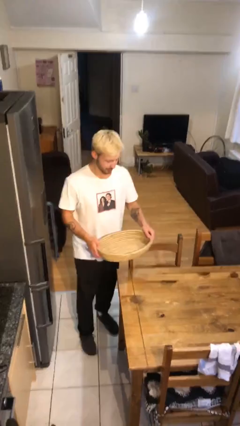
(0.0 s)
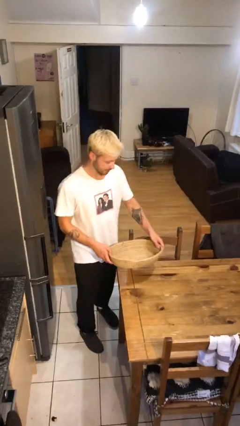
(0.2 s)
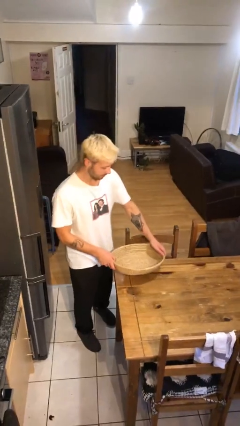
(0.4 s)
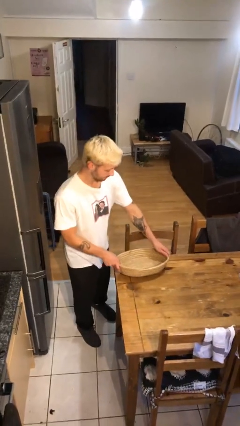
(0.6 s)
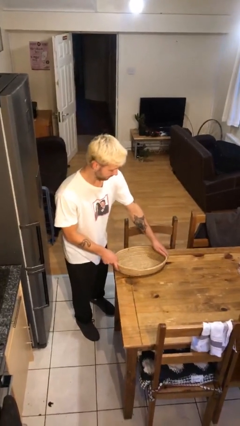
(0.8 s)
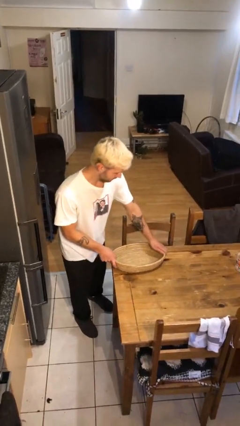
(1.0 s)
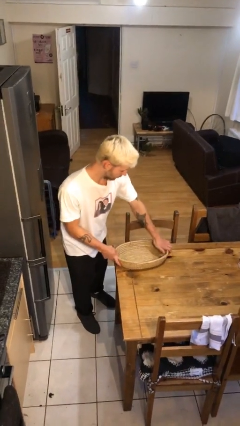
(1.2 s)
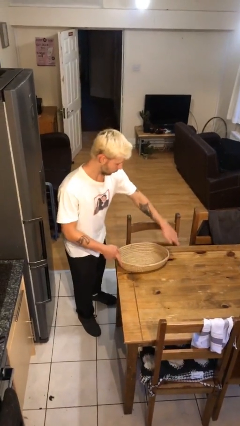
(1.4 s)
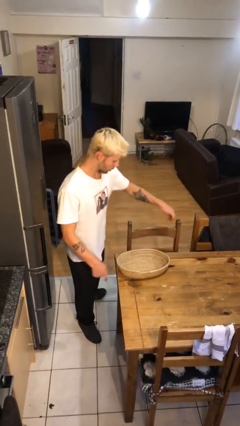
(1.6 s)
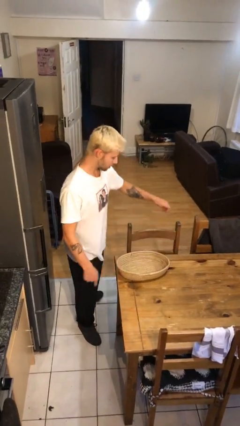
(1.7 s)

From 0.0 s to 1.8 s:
person puts down object on table

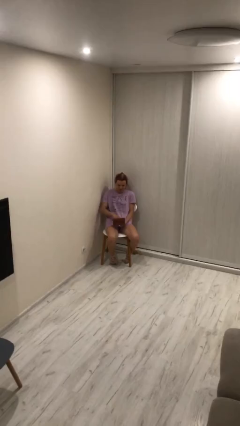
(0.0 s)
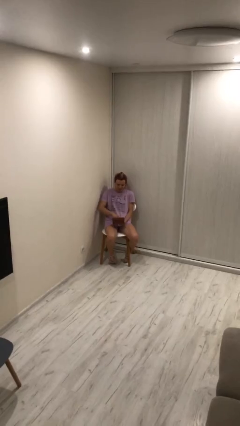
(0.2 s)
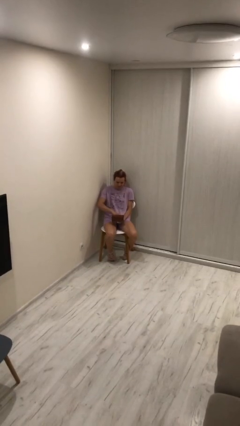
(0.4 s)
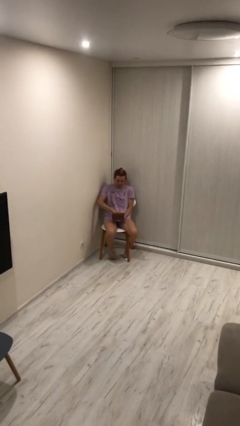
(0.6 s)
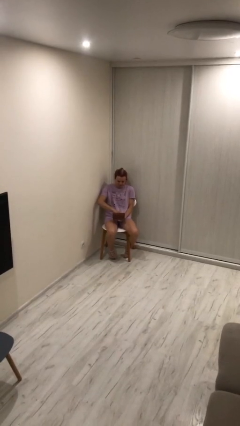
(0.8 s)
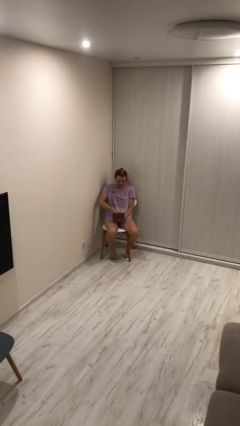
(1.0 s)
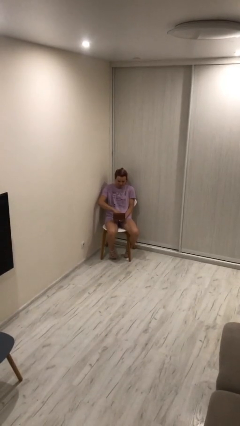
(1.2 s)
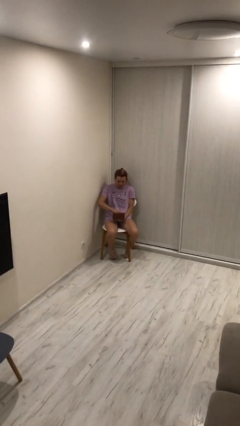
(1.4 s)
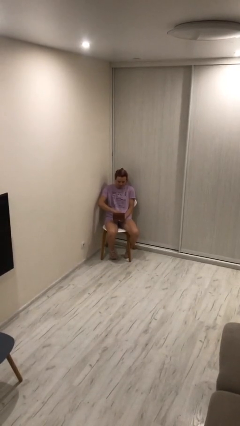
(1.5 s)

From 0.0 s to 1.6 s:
person searches jewelry box

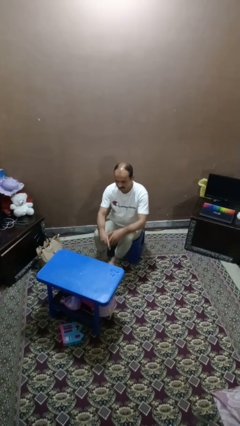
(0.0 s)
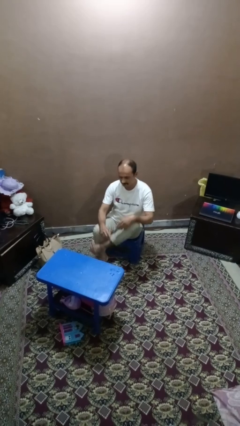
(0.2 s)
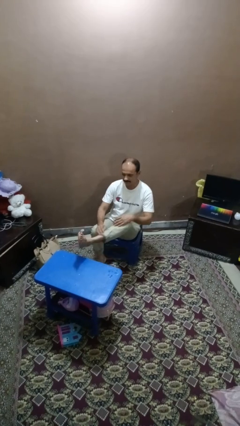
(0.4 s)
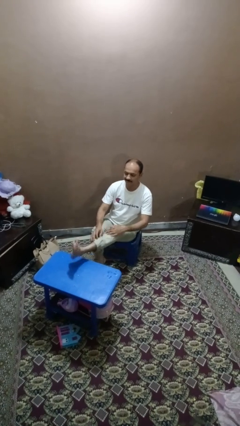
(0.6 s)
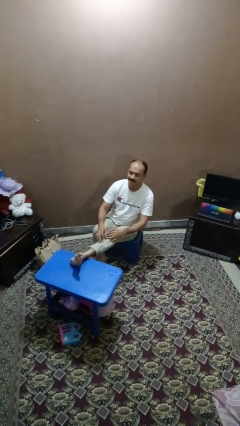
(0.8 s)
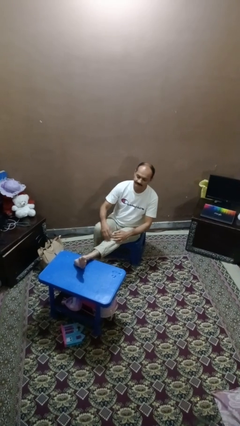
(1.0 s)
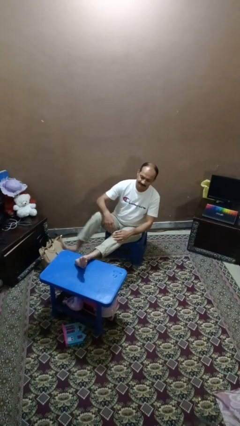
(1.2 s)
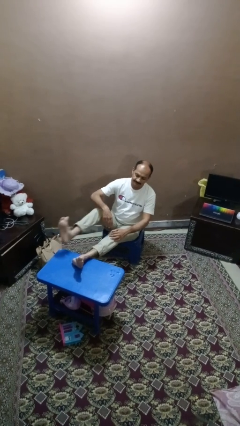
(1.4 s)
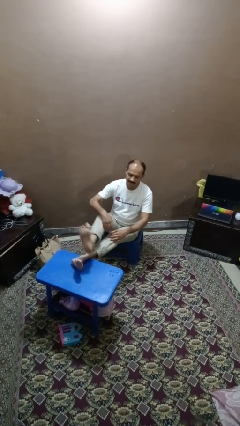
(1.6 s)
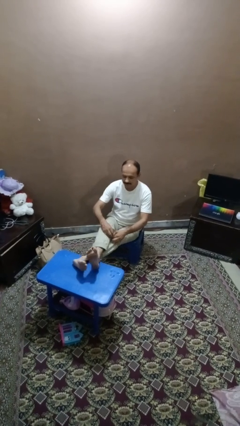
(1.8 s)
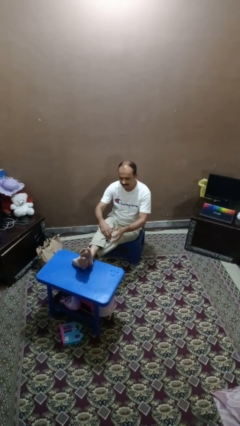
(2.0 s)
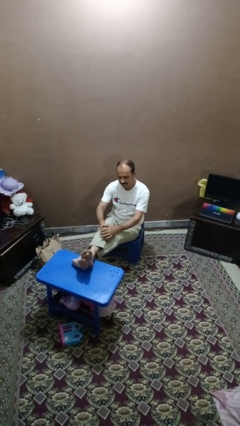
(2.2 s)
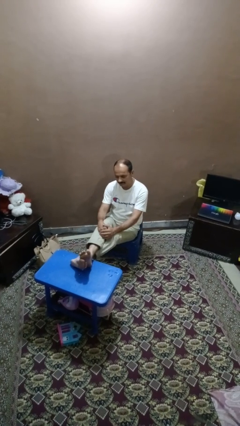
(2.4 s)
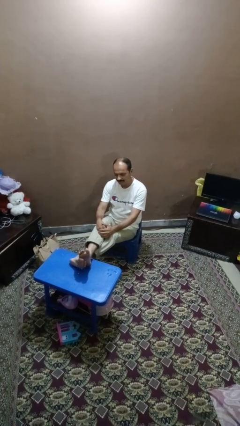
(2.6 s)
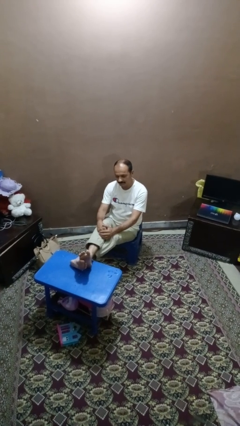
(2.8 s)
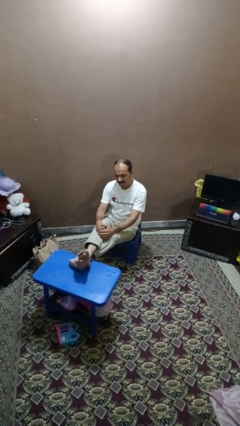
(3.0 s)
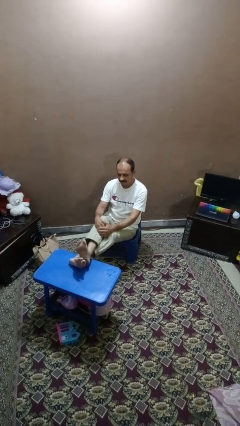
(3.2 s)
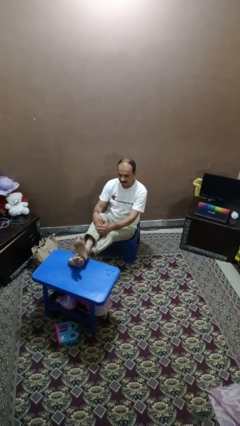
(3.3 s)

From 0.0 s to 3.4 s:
person puts feet up

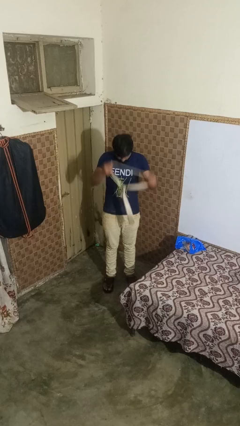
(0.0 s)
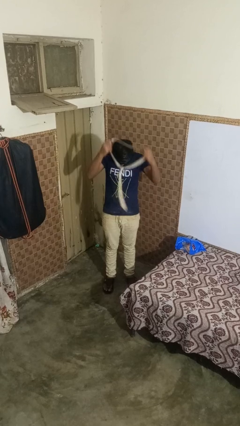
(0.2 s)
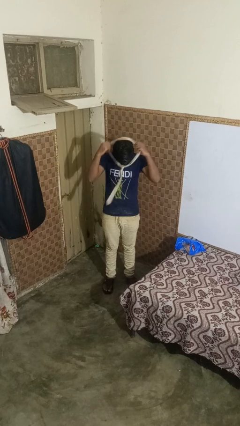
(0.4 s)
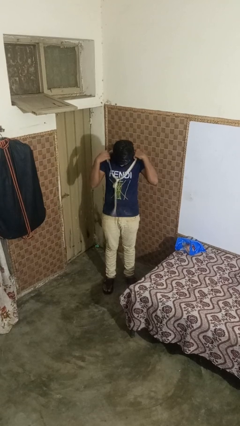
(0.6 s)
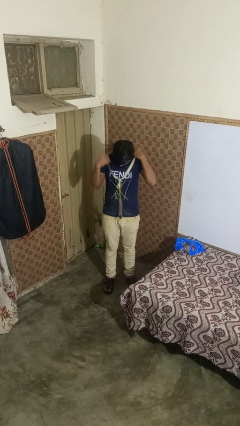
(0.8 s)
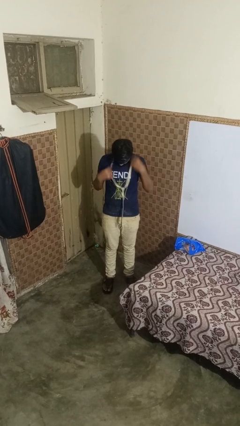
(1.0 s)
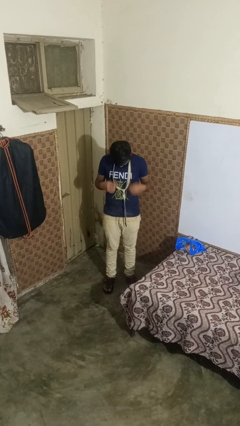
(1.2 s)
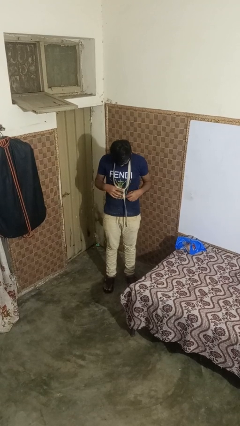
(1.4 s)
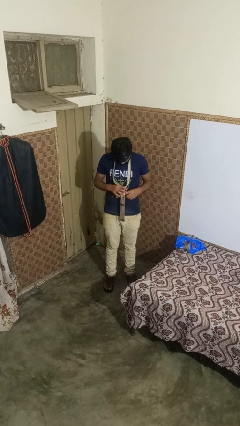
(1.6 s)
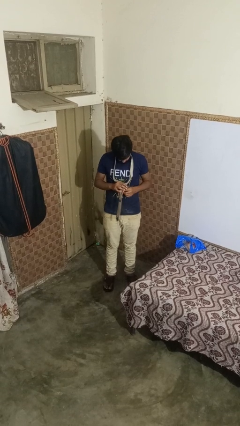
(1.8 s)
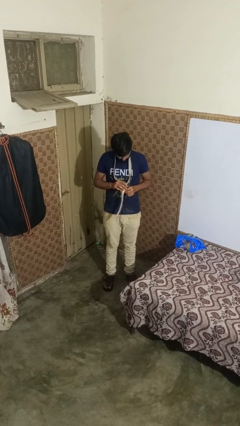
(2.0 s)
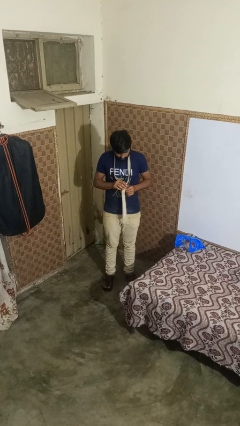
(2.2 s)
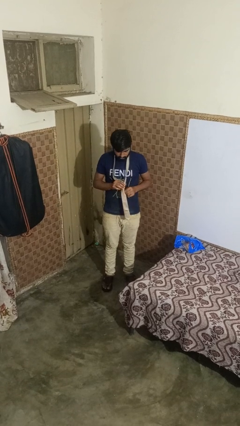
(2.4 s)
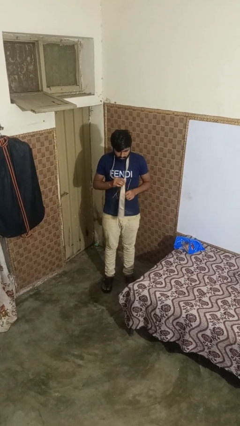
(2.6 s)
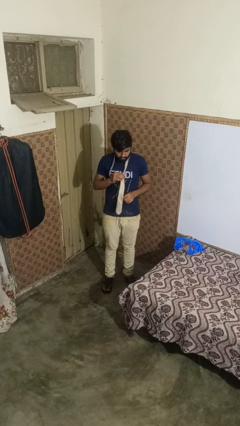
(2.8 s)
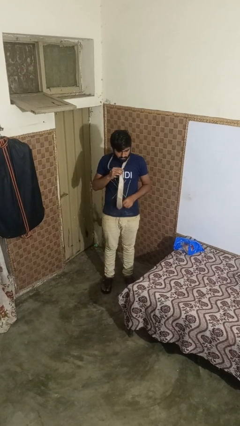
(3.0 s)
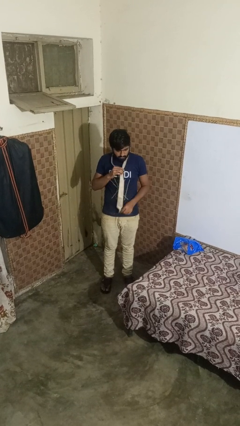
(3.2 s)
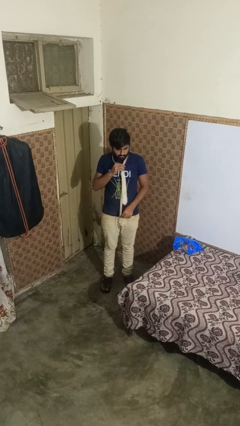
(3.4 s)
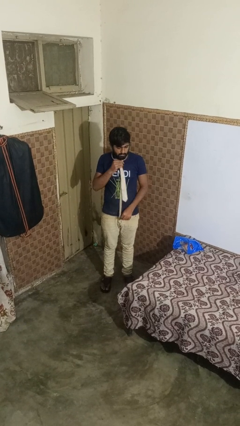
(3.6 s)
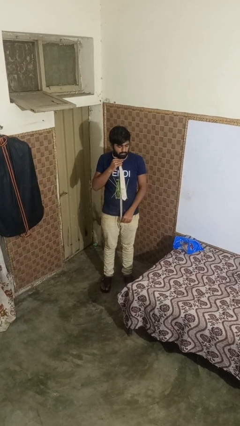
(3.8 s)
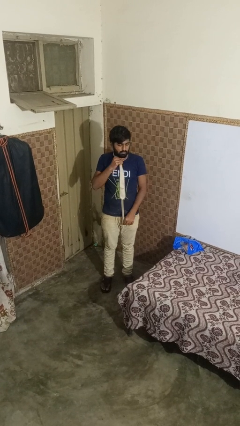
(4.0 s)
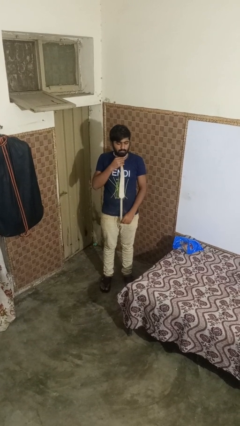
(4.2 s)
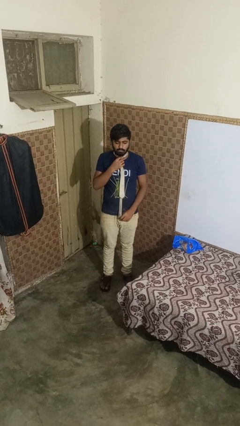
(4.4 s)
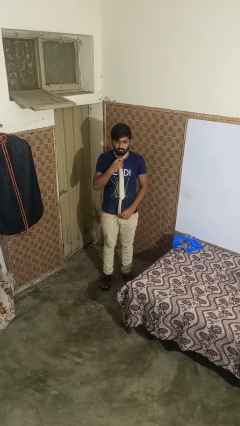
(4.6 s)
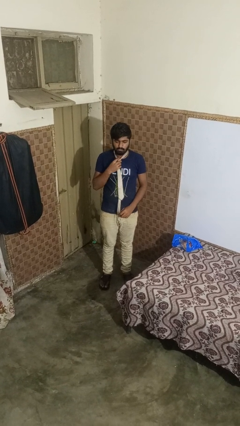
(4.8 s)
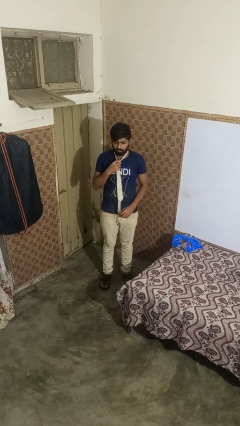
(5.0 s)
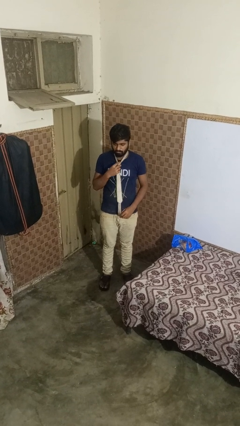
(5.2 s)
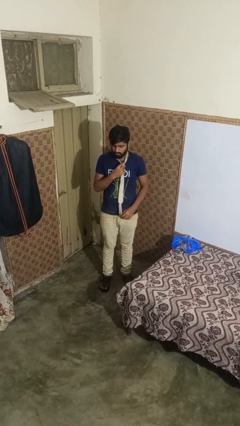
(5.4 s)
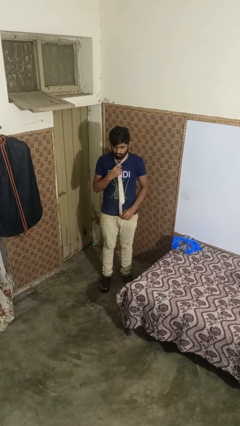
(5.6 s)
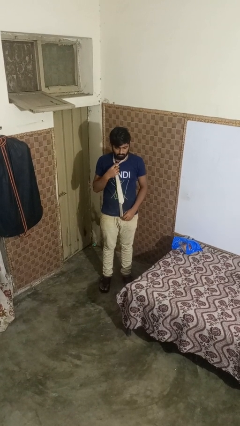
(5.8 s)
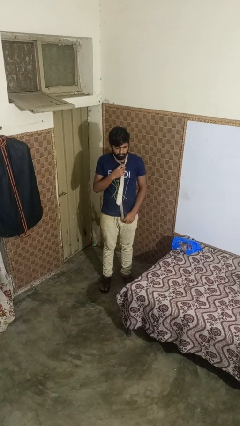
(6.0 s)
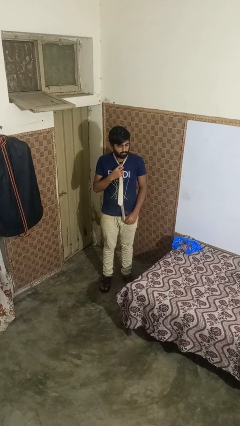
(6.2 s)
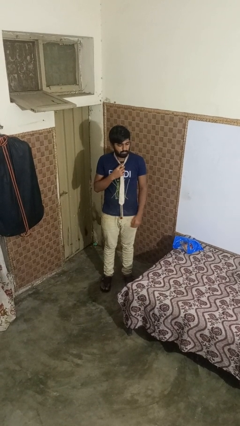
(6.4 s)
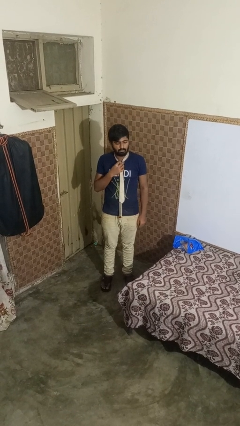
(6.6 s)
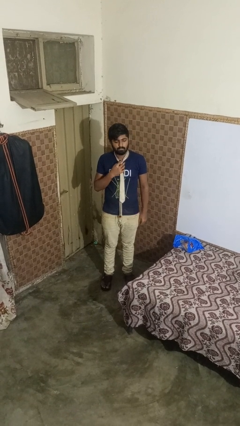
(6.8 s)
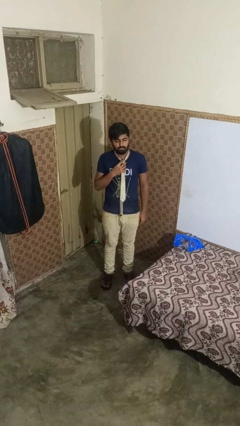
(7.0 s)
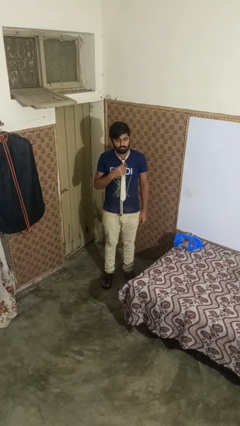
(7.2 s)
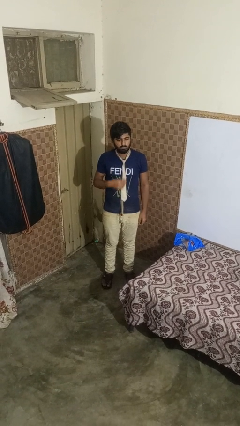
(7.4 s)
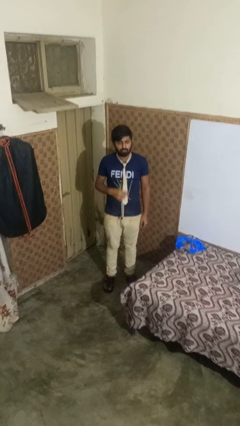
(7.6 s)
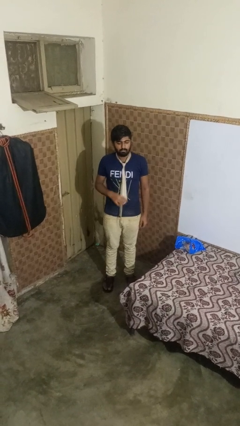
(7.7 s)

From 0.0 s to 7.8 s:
person puts on necktie

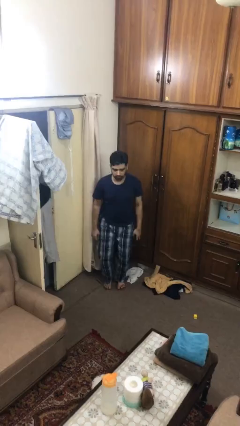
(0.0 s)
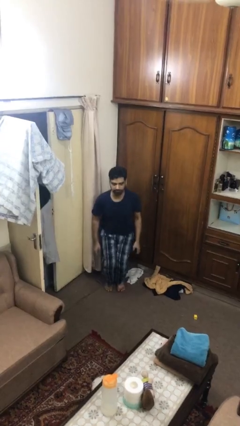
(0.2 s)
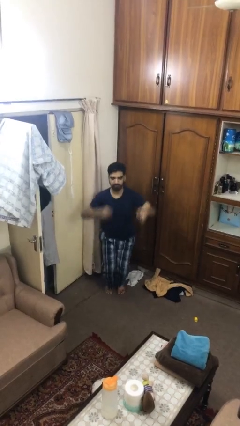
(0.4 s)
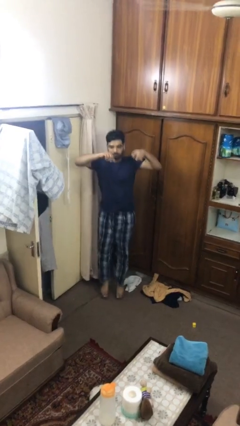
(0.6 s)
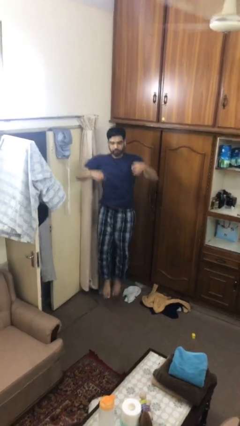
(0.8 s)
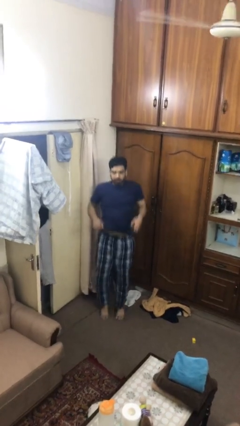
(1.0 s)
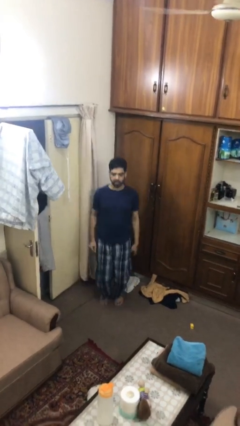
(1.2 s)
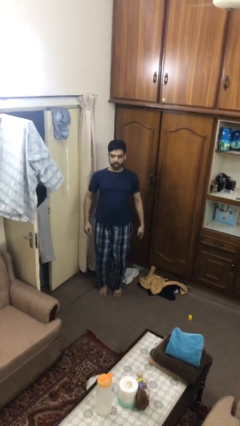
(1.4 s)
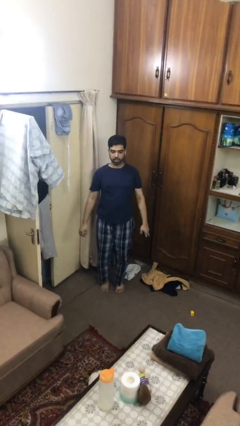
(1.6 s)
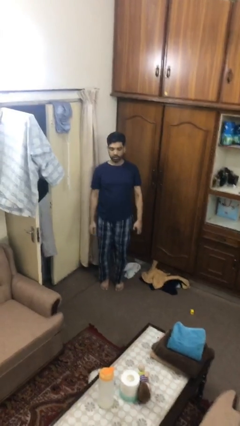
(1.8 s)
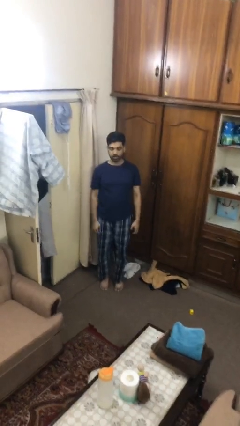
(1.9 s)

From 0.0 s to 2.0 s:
person jumps

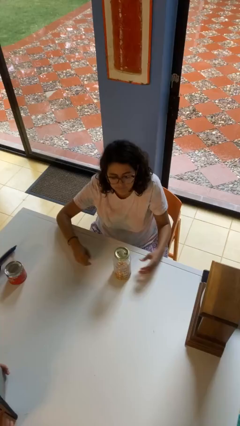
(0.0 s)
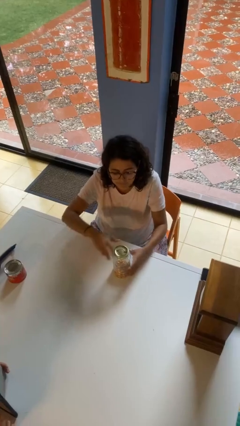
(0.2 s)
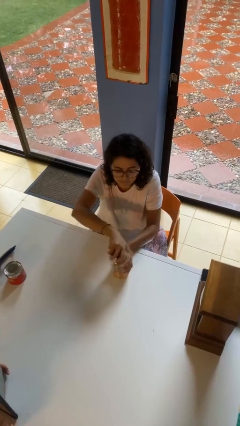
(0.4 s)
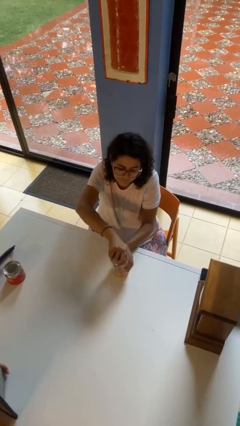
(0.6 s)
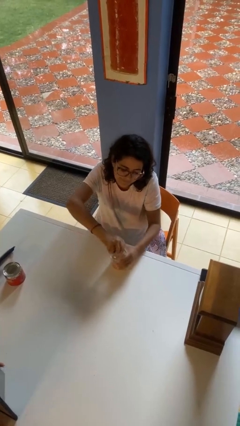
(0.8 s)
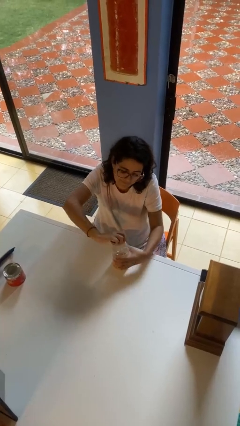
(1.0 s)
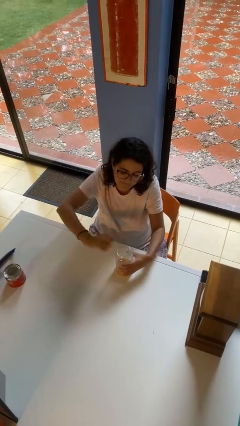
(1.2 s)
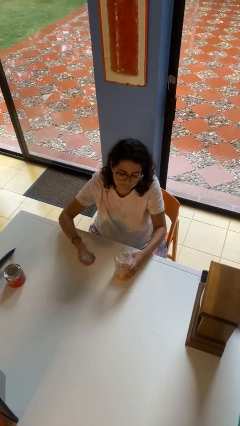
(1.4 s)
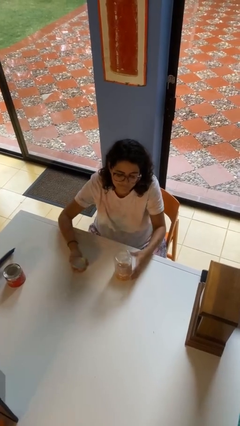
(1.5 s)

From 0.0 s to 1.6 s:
person opens jar
